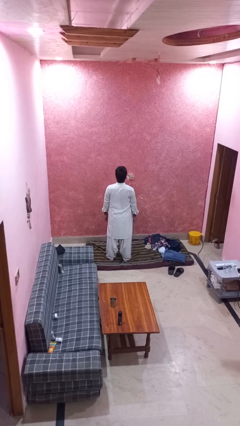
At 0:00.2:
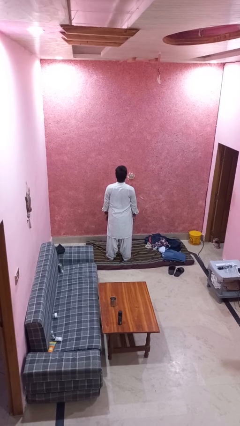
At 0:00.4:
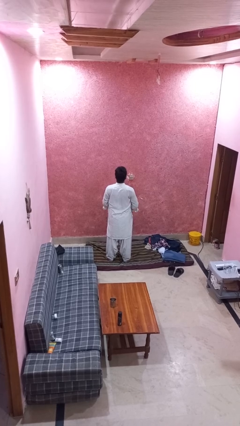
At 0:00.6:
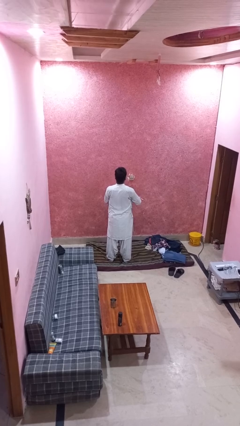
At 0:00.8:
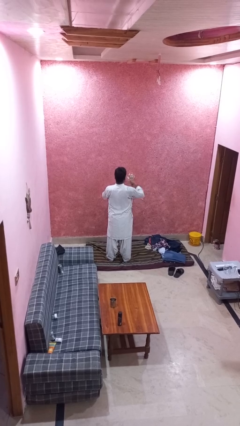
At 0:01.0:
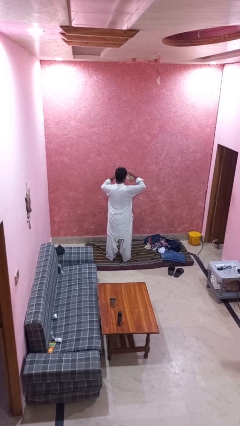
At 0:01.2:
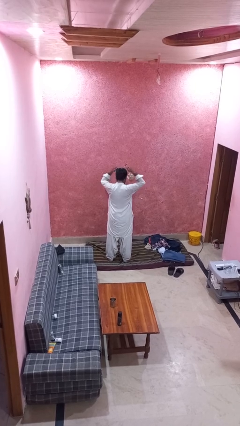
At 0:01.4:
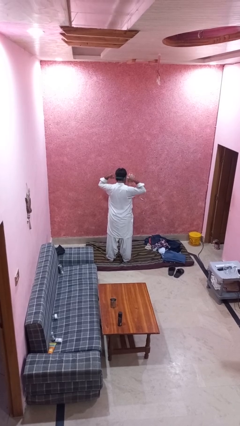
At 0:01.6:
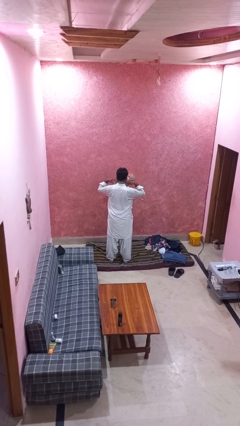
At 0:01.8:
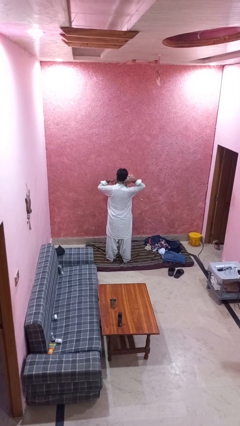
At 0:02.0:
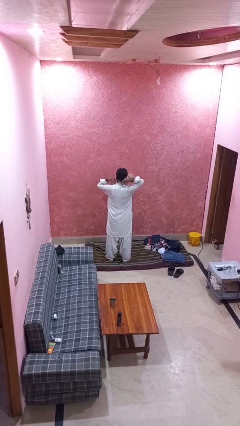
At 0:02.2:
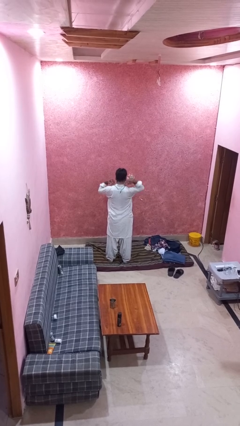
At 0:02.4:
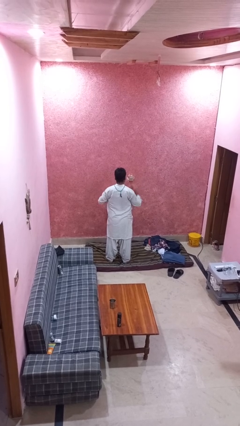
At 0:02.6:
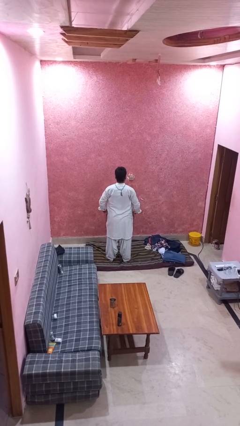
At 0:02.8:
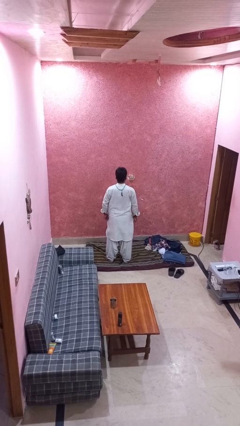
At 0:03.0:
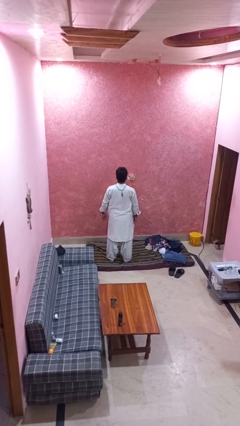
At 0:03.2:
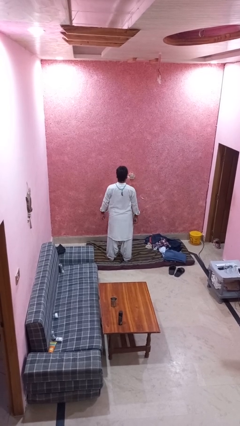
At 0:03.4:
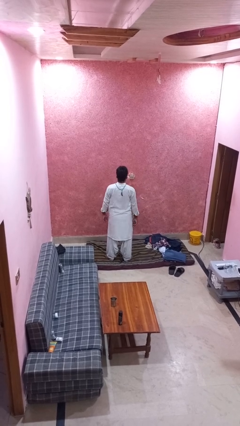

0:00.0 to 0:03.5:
person puts on necklace

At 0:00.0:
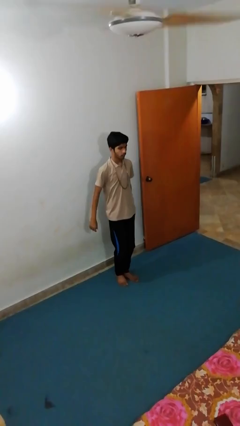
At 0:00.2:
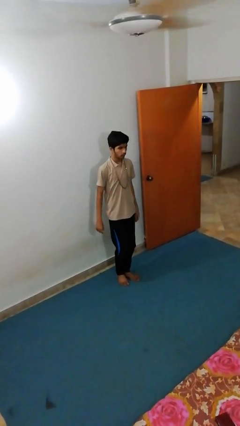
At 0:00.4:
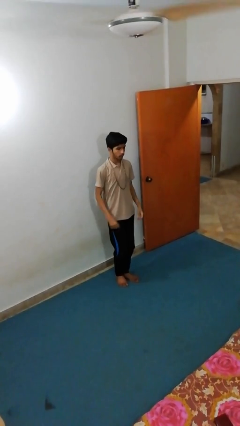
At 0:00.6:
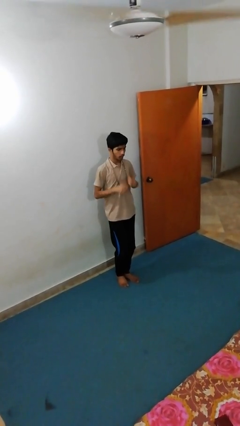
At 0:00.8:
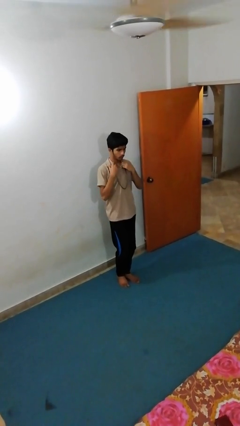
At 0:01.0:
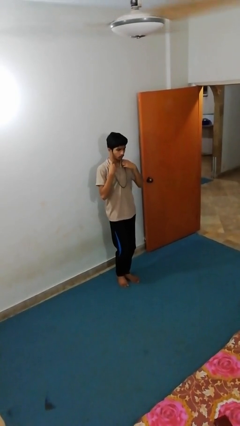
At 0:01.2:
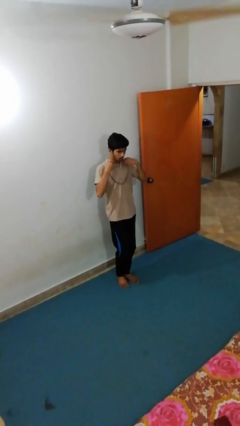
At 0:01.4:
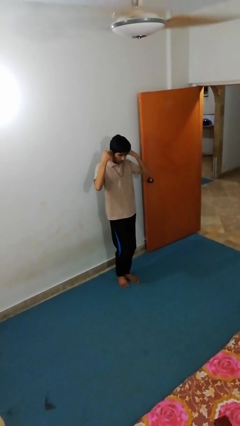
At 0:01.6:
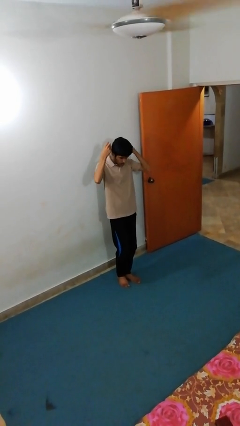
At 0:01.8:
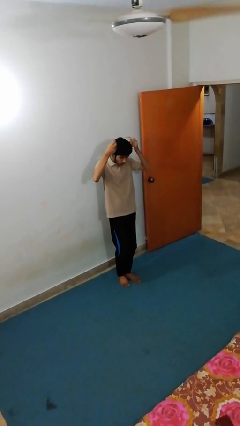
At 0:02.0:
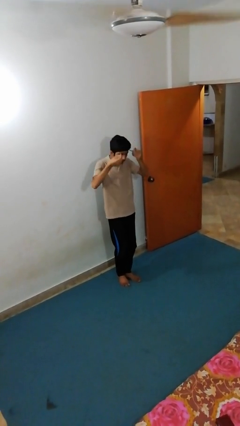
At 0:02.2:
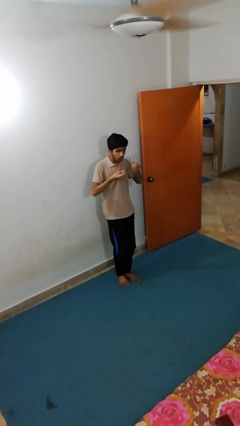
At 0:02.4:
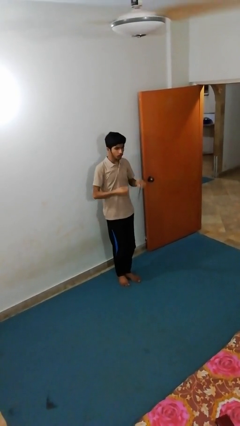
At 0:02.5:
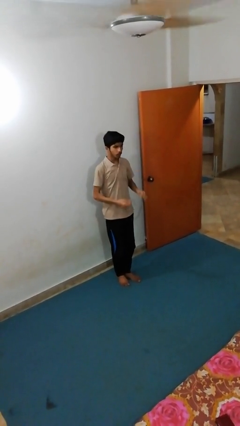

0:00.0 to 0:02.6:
person takes off necklace

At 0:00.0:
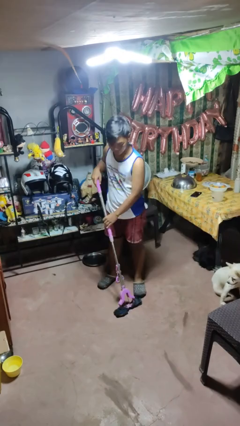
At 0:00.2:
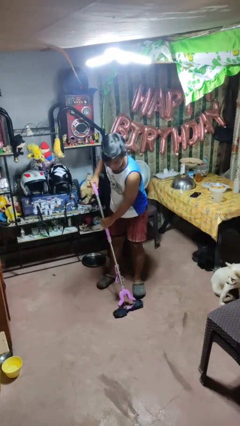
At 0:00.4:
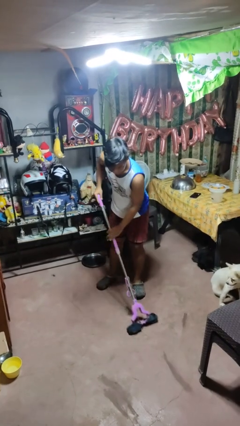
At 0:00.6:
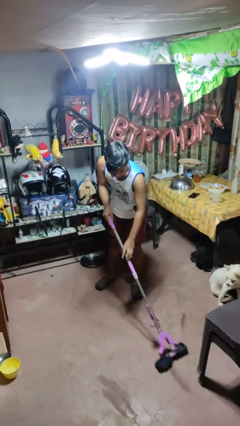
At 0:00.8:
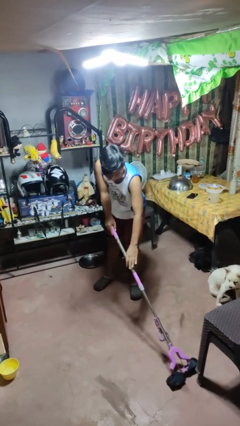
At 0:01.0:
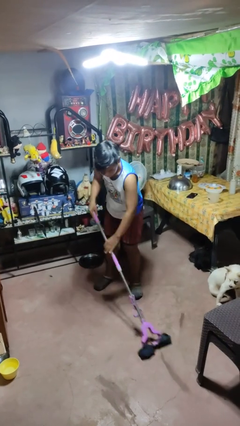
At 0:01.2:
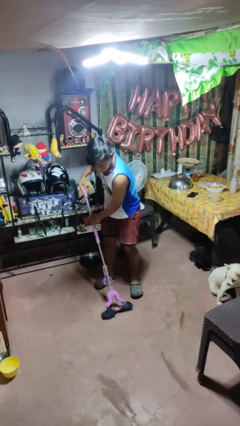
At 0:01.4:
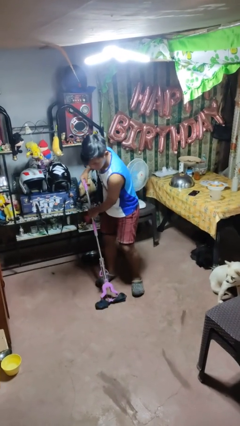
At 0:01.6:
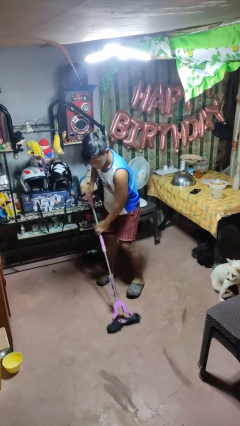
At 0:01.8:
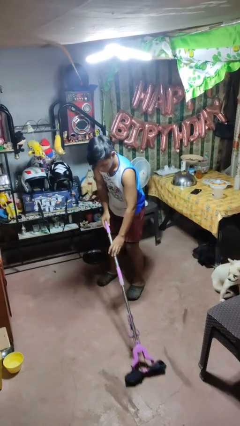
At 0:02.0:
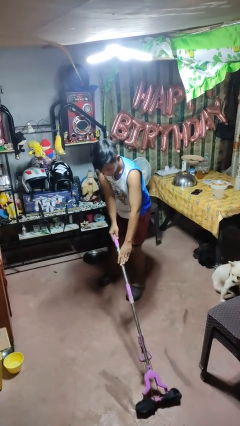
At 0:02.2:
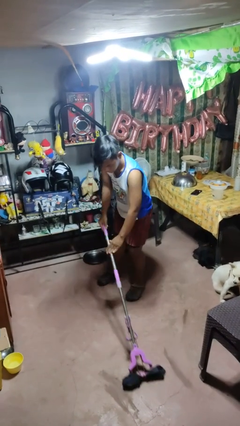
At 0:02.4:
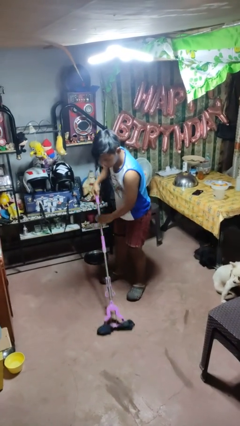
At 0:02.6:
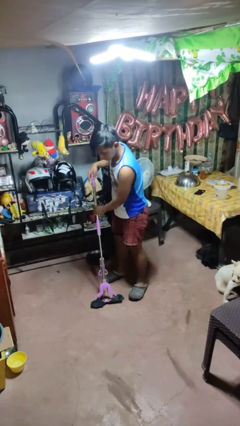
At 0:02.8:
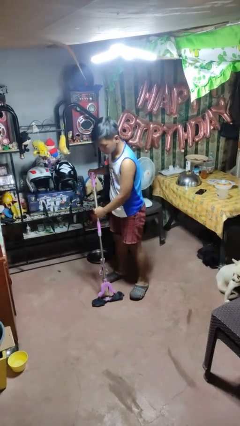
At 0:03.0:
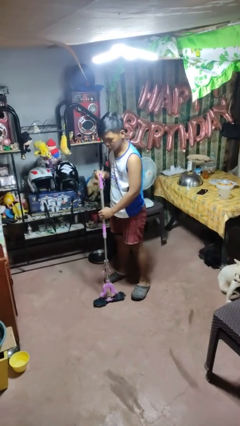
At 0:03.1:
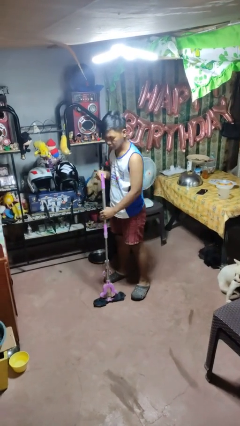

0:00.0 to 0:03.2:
person mops

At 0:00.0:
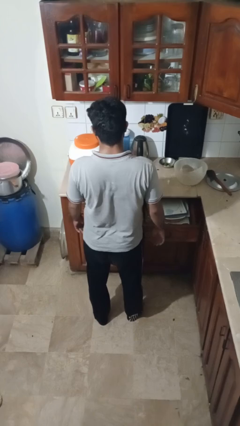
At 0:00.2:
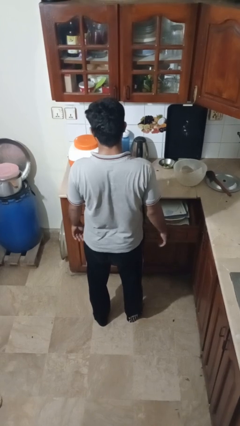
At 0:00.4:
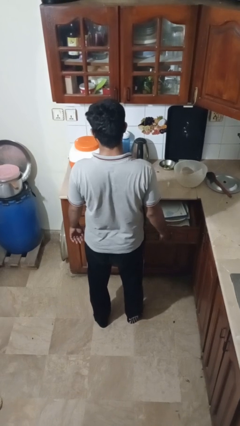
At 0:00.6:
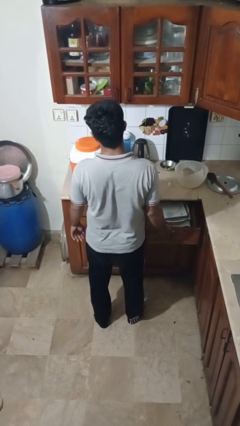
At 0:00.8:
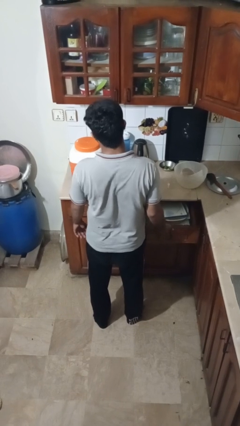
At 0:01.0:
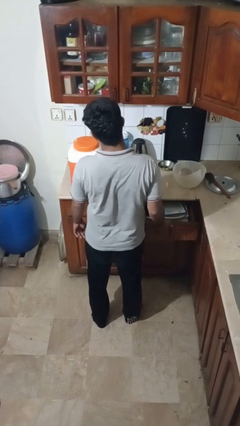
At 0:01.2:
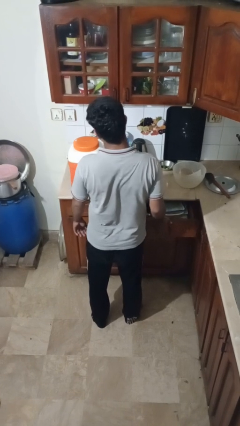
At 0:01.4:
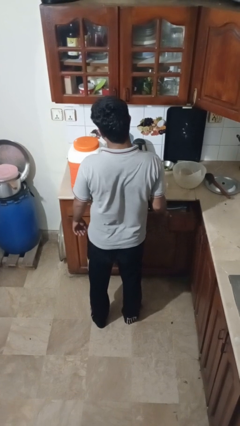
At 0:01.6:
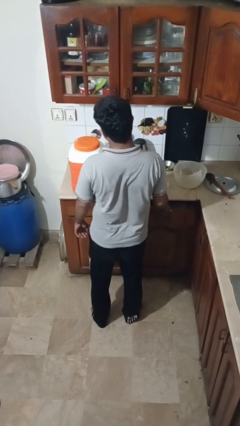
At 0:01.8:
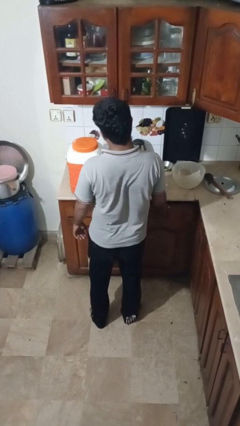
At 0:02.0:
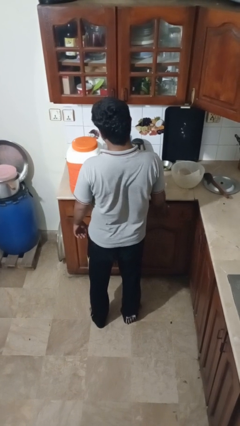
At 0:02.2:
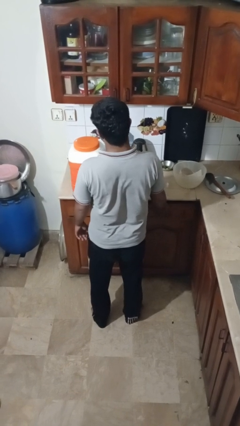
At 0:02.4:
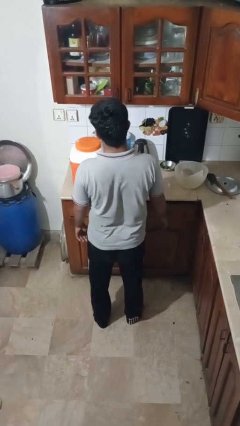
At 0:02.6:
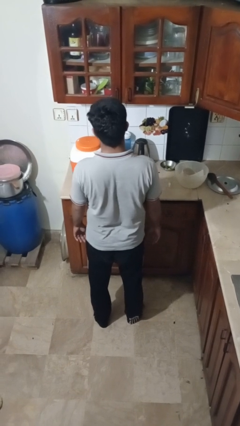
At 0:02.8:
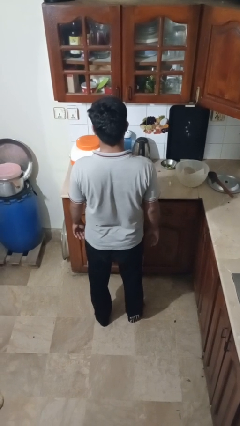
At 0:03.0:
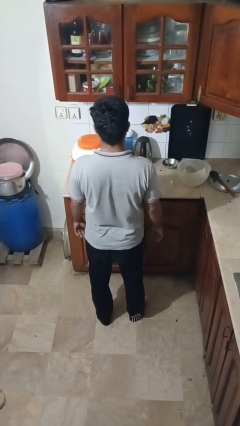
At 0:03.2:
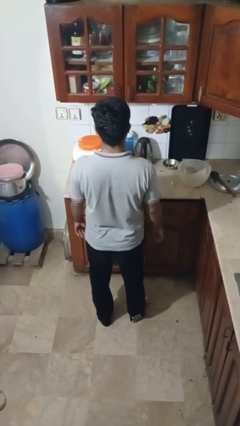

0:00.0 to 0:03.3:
person closes kitchen drawer

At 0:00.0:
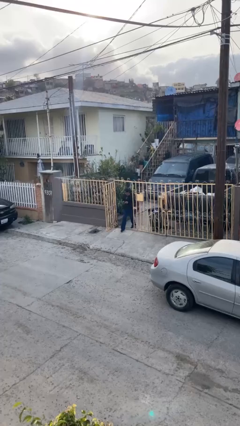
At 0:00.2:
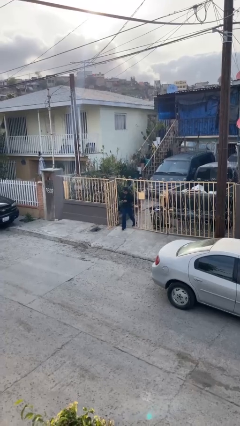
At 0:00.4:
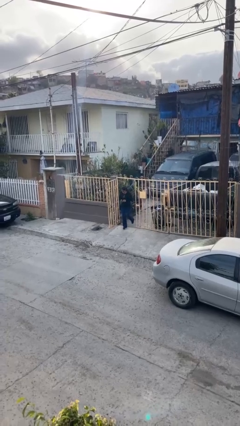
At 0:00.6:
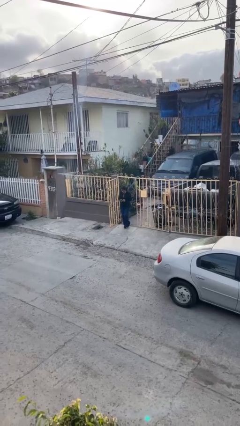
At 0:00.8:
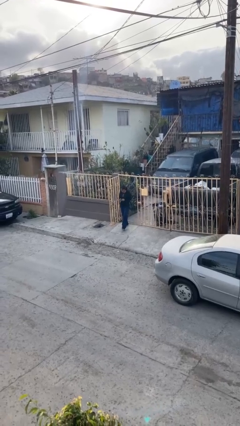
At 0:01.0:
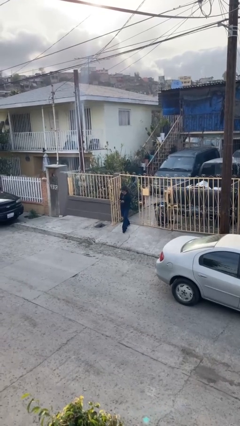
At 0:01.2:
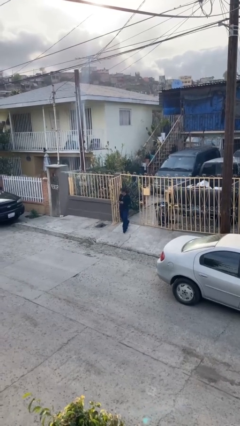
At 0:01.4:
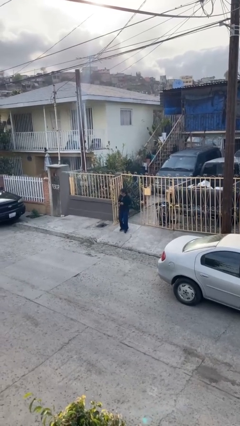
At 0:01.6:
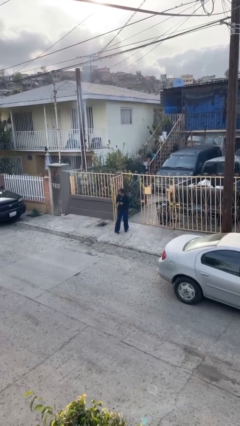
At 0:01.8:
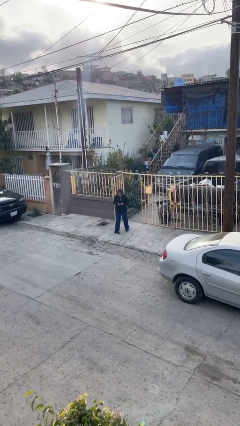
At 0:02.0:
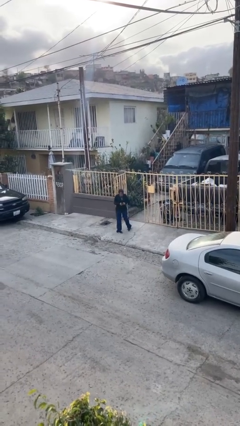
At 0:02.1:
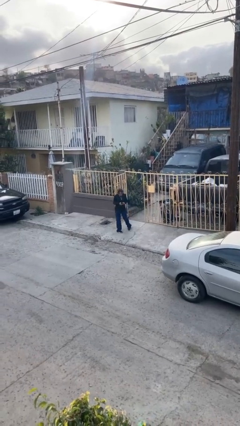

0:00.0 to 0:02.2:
person enters scene through structure

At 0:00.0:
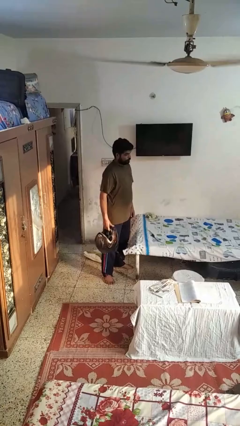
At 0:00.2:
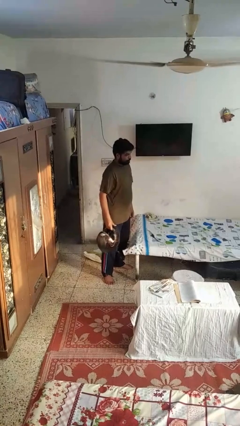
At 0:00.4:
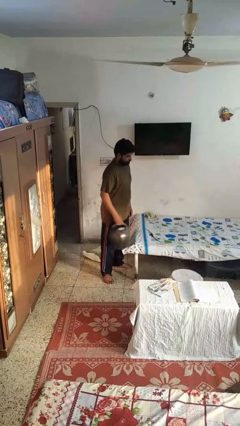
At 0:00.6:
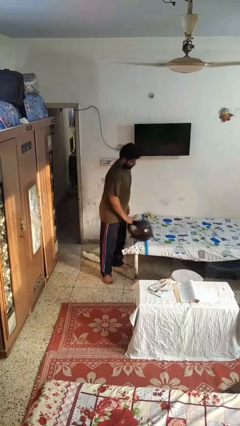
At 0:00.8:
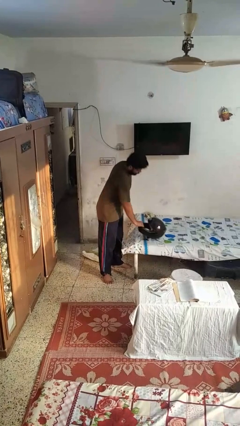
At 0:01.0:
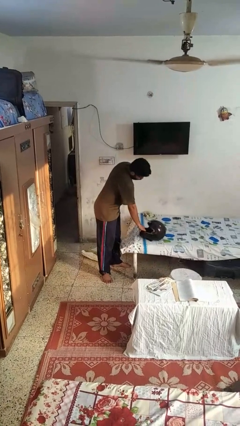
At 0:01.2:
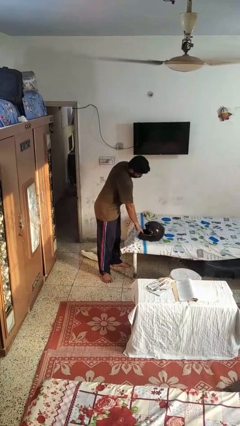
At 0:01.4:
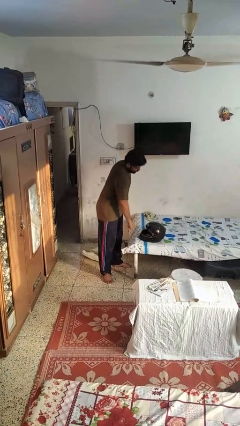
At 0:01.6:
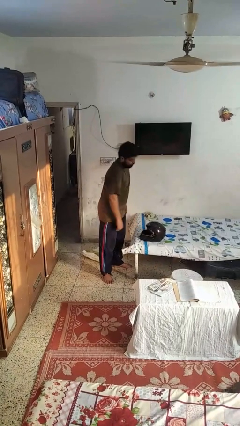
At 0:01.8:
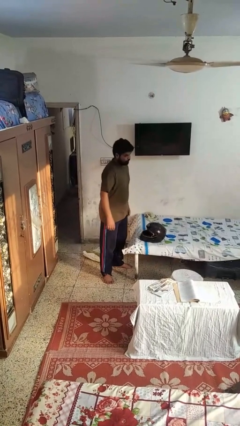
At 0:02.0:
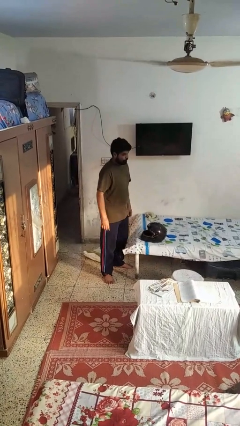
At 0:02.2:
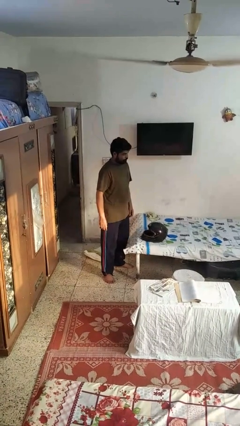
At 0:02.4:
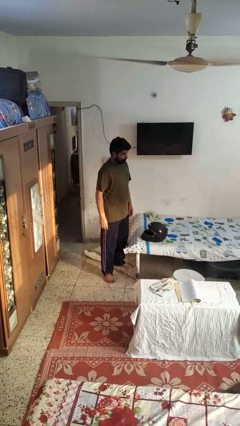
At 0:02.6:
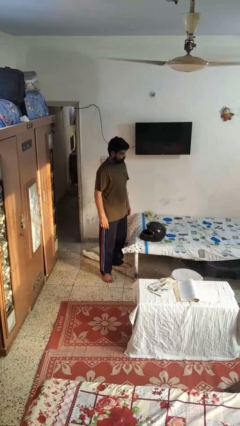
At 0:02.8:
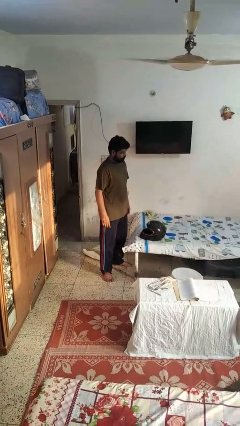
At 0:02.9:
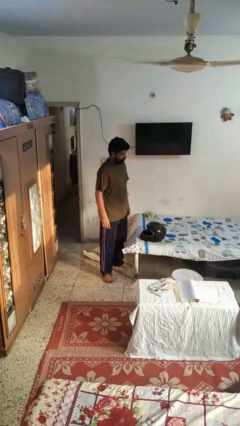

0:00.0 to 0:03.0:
person puts down object on bed
